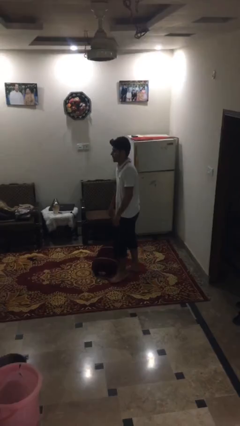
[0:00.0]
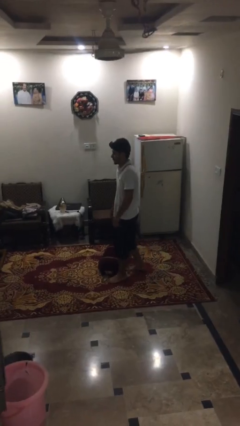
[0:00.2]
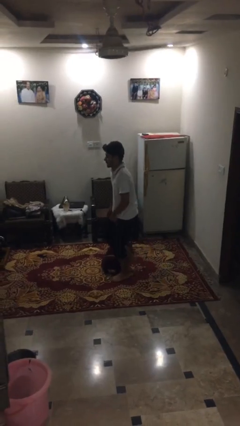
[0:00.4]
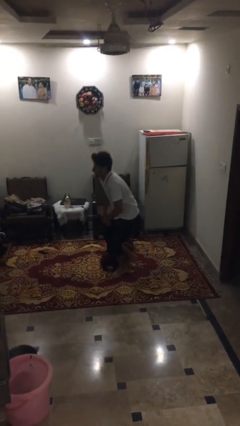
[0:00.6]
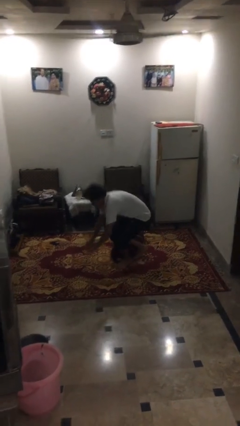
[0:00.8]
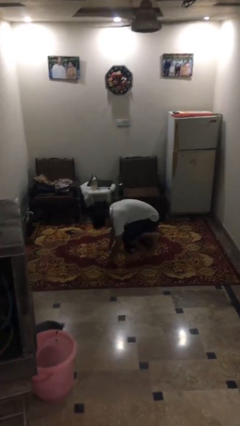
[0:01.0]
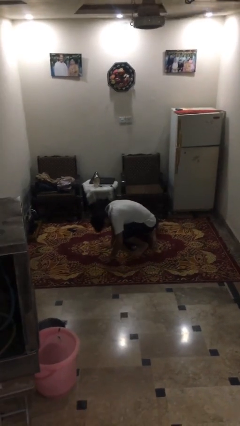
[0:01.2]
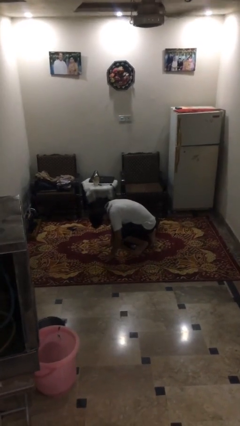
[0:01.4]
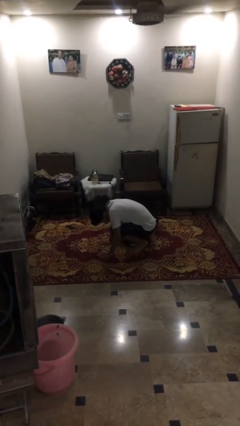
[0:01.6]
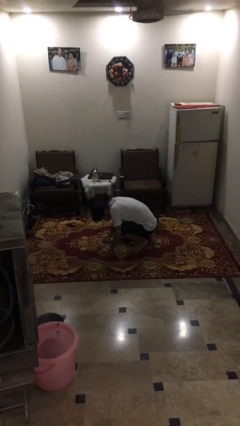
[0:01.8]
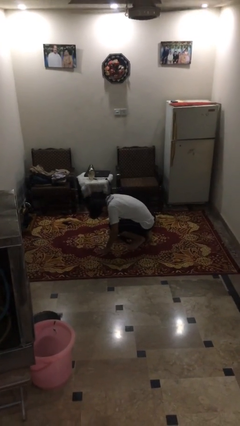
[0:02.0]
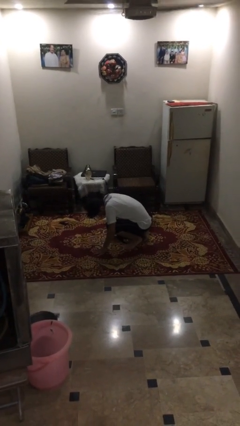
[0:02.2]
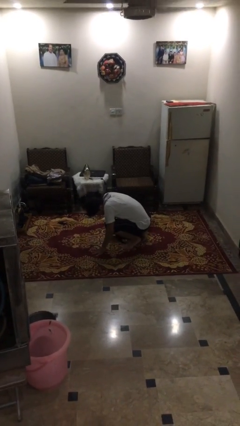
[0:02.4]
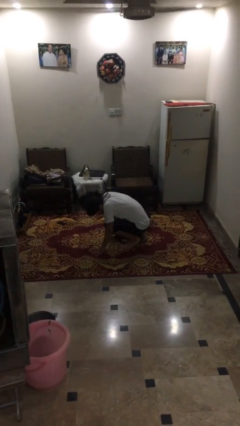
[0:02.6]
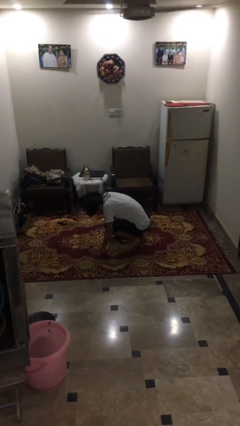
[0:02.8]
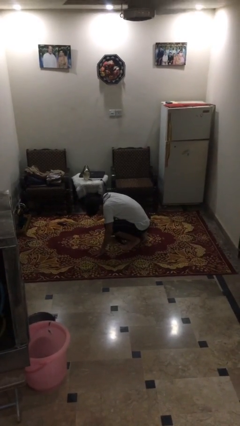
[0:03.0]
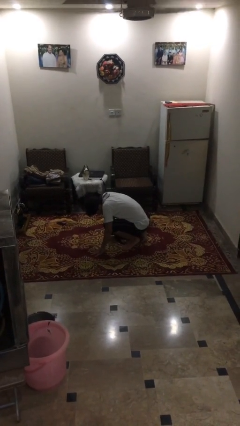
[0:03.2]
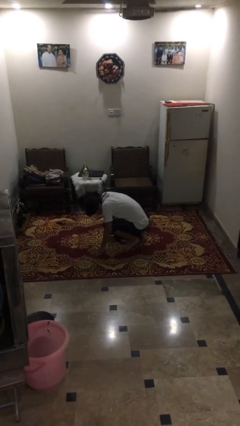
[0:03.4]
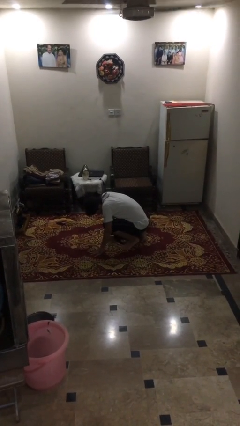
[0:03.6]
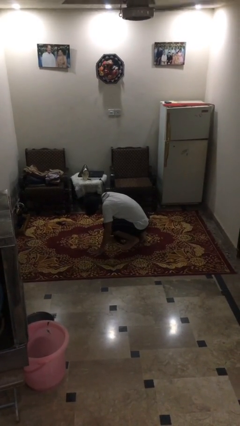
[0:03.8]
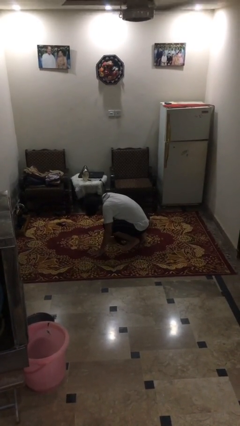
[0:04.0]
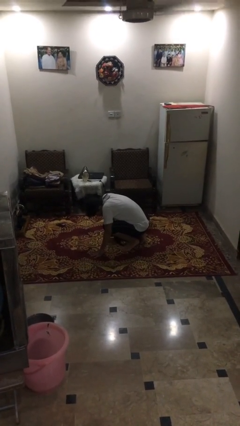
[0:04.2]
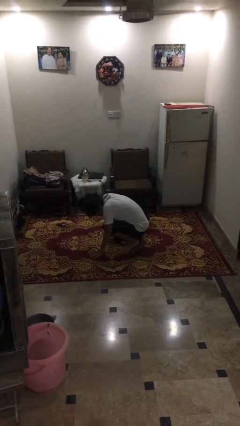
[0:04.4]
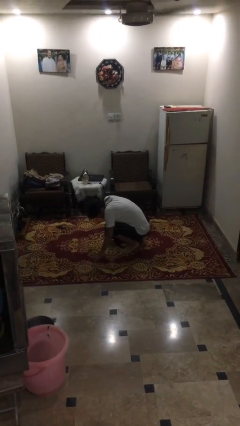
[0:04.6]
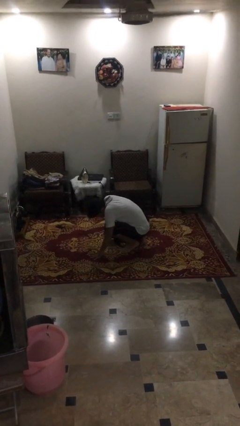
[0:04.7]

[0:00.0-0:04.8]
person trips on object on floor

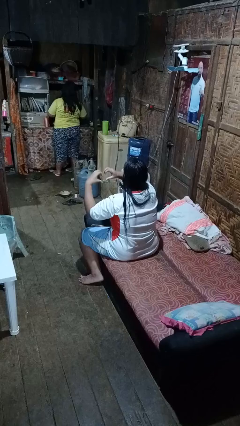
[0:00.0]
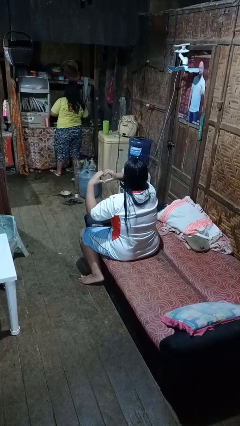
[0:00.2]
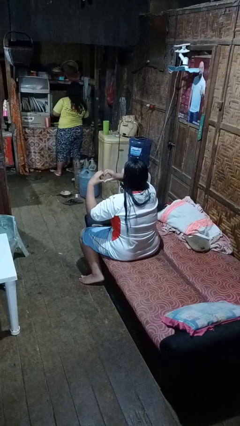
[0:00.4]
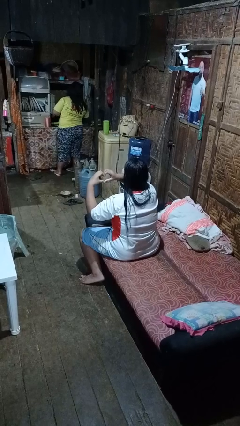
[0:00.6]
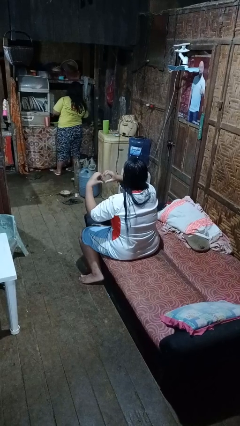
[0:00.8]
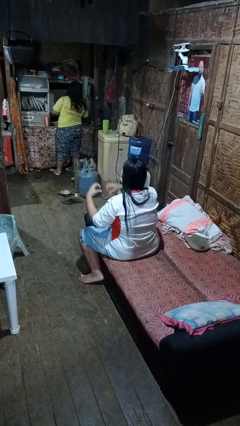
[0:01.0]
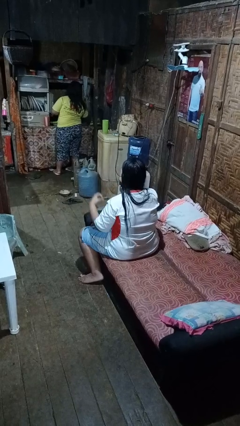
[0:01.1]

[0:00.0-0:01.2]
person gestures heart

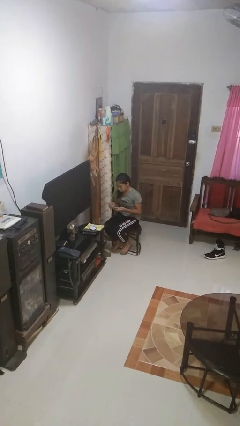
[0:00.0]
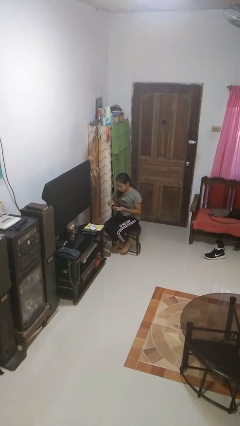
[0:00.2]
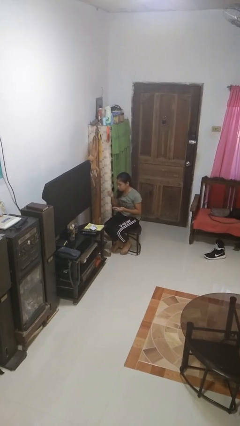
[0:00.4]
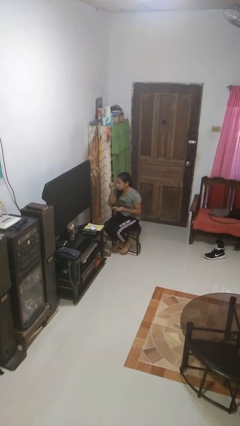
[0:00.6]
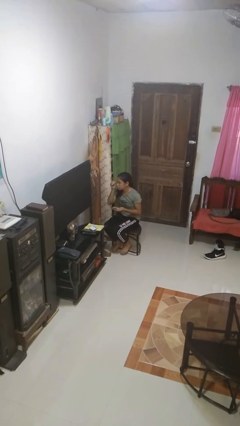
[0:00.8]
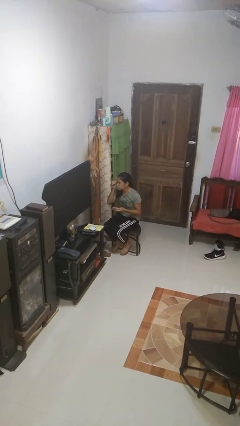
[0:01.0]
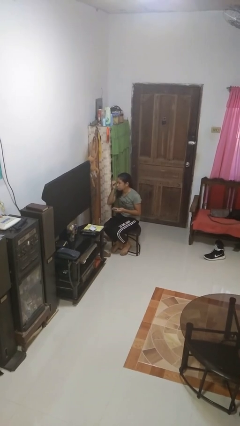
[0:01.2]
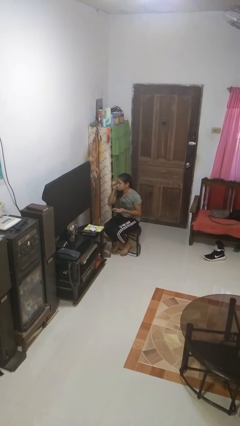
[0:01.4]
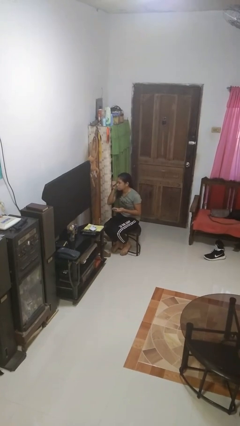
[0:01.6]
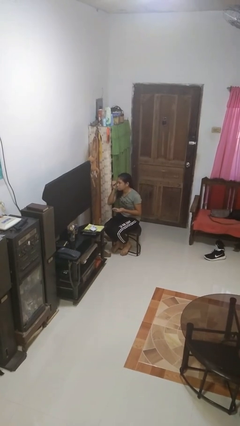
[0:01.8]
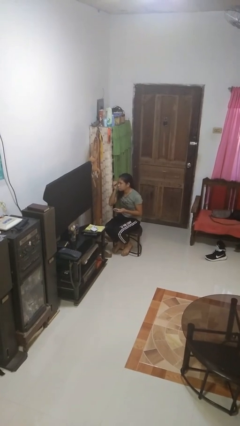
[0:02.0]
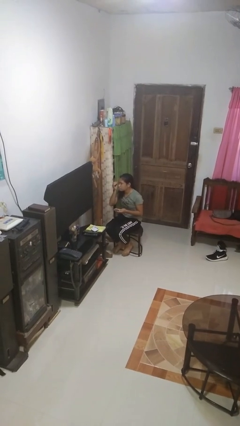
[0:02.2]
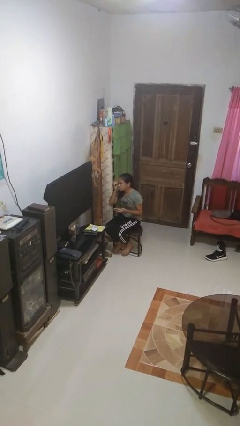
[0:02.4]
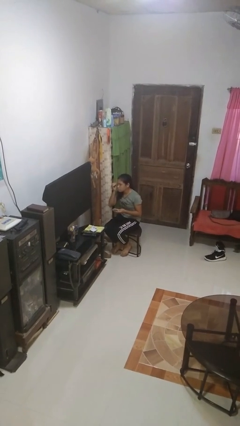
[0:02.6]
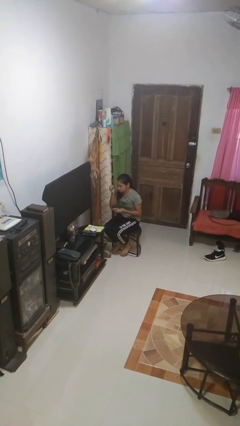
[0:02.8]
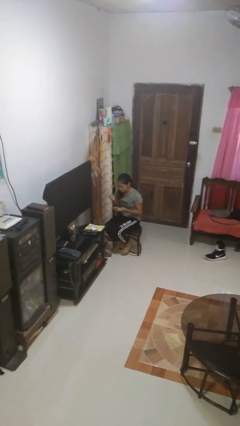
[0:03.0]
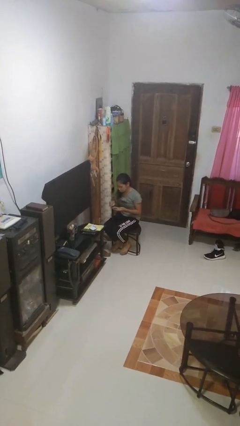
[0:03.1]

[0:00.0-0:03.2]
person applies eye makeup

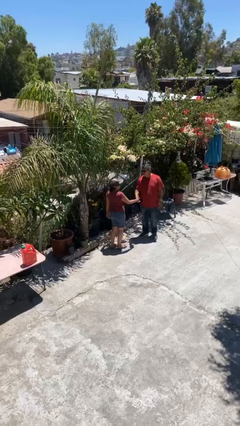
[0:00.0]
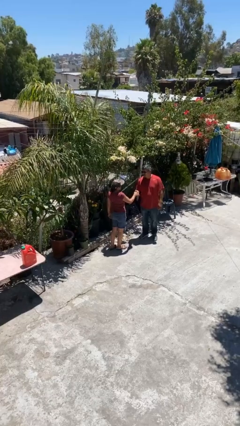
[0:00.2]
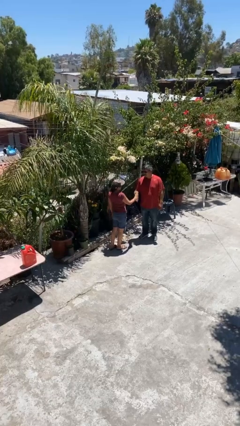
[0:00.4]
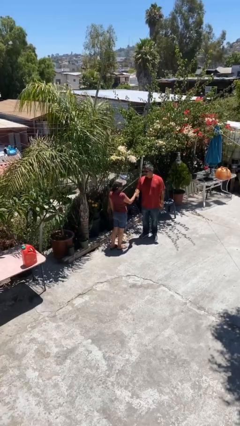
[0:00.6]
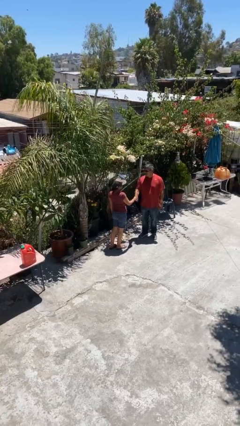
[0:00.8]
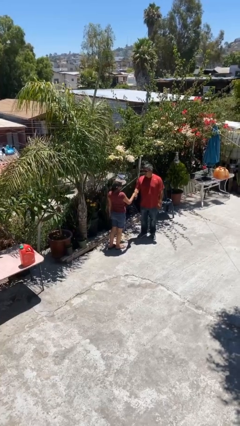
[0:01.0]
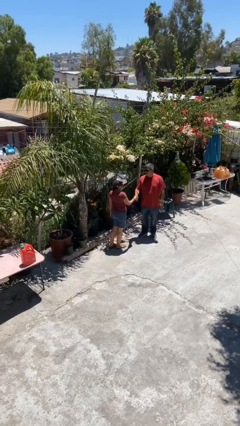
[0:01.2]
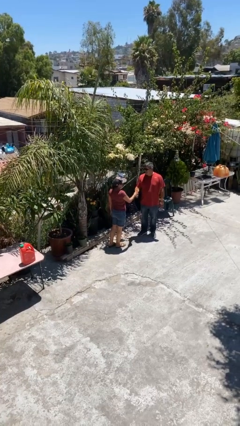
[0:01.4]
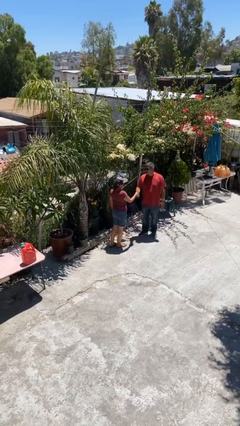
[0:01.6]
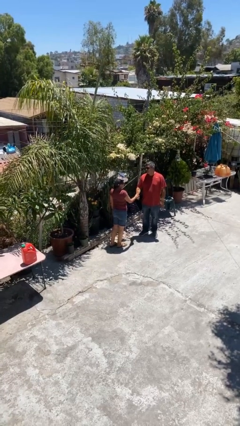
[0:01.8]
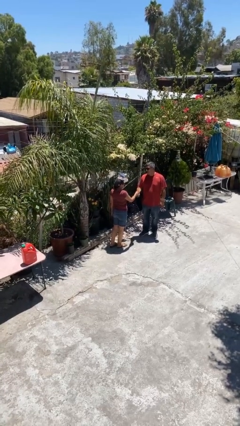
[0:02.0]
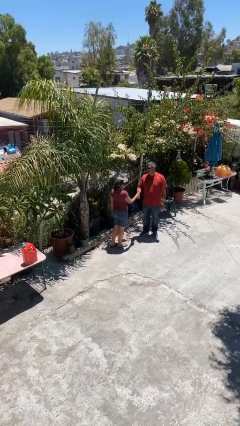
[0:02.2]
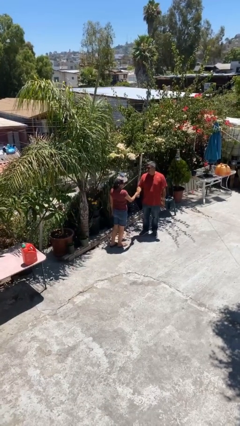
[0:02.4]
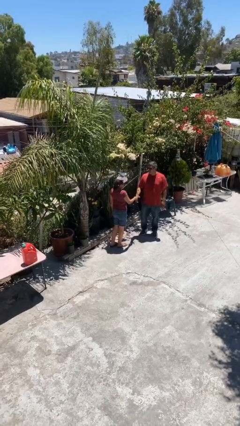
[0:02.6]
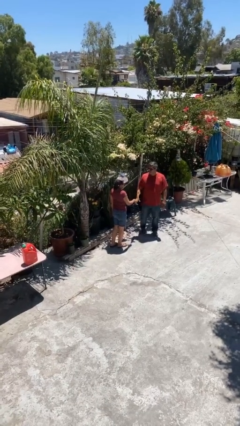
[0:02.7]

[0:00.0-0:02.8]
person shakes hand

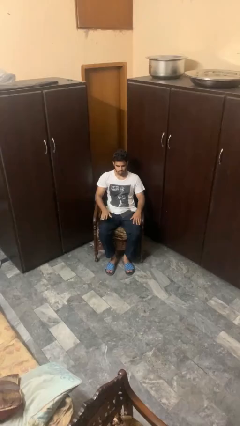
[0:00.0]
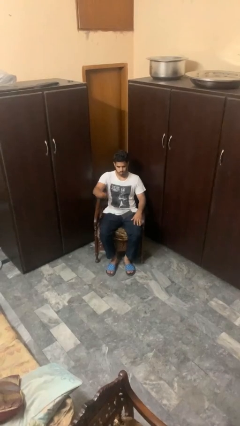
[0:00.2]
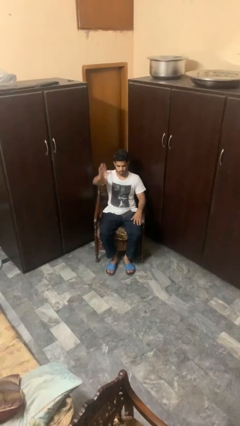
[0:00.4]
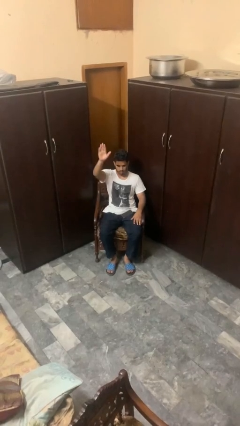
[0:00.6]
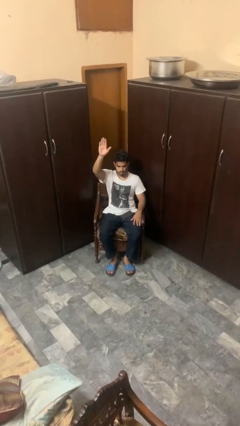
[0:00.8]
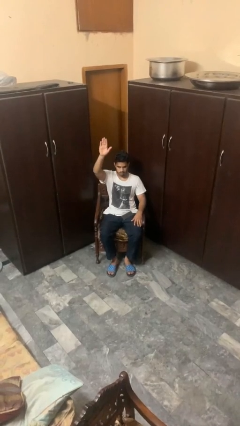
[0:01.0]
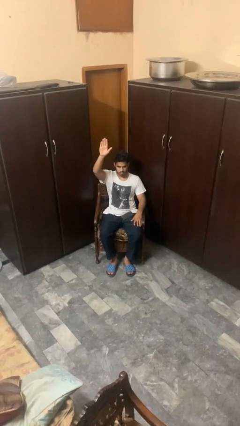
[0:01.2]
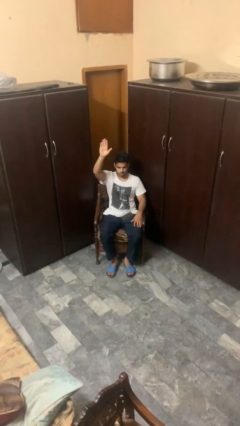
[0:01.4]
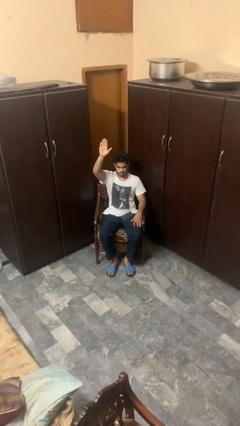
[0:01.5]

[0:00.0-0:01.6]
person gestures raise hand

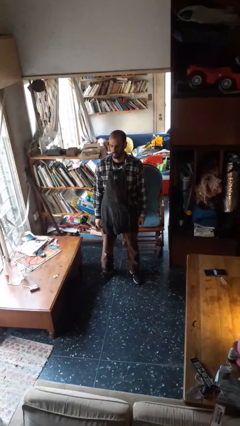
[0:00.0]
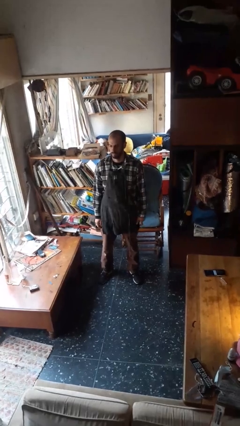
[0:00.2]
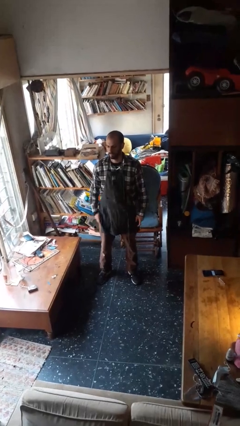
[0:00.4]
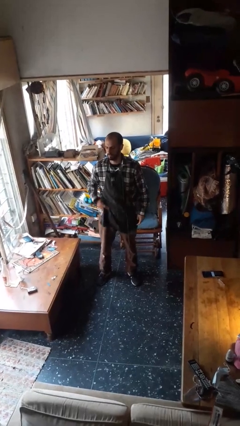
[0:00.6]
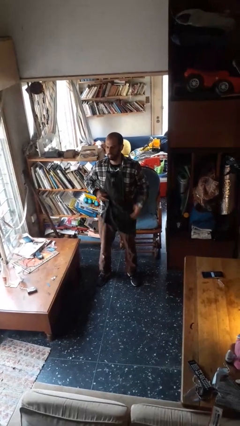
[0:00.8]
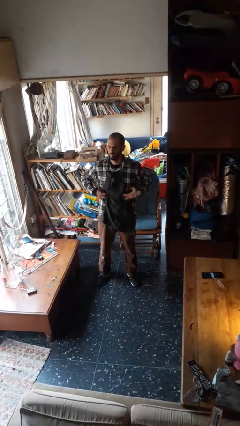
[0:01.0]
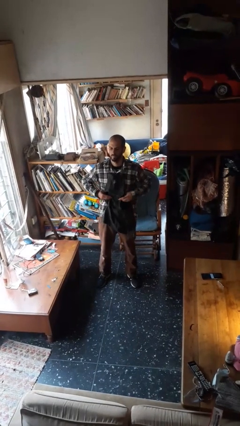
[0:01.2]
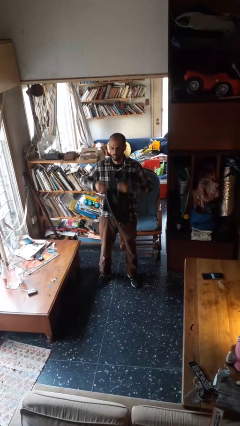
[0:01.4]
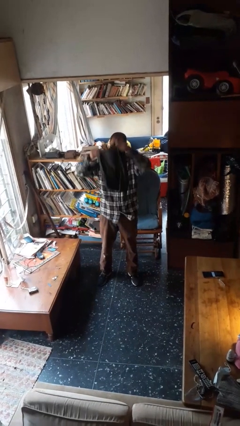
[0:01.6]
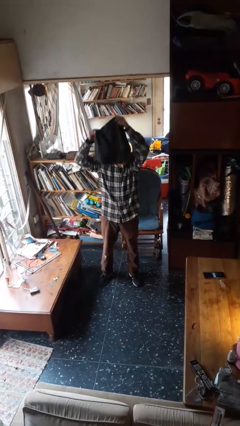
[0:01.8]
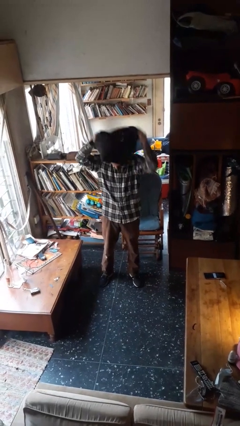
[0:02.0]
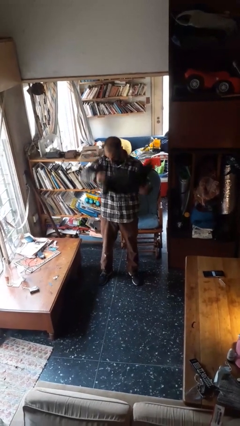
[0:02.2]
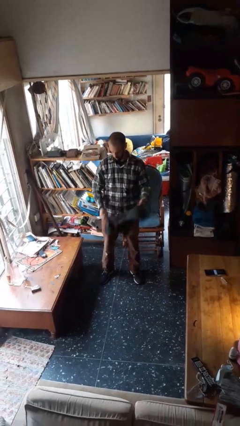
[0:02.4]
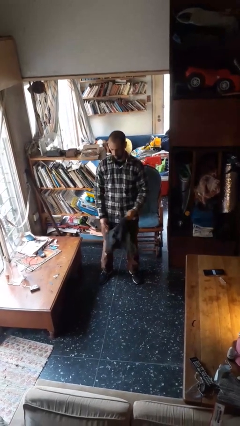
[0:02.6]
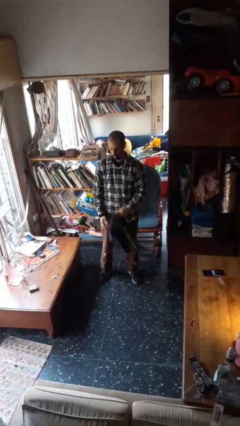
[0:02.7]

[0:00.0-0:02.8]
person takes off apron

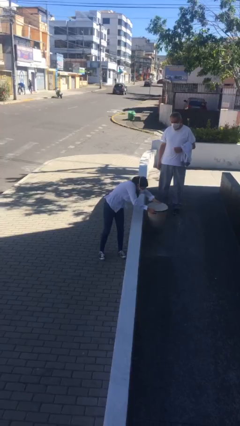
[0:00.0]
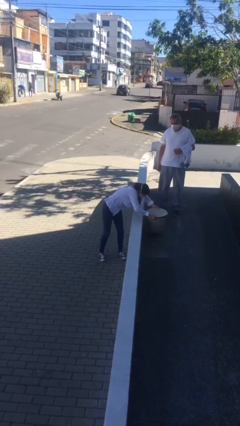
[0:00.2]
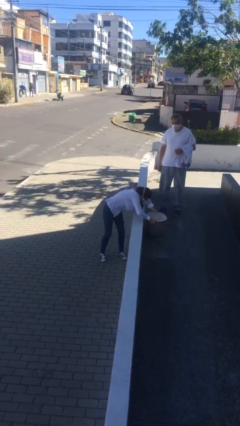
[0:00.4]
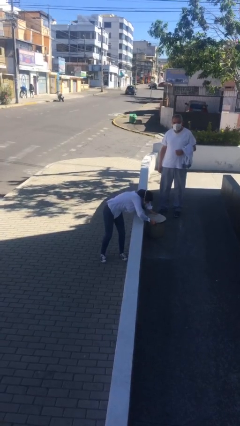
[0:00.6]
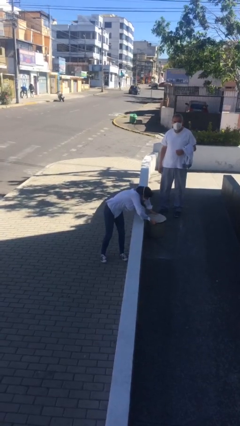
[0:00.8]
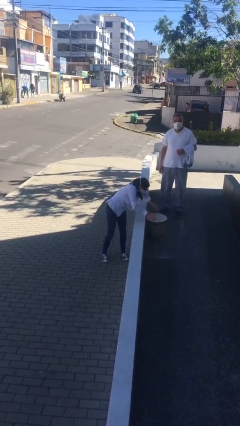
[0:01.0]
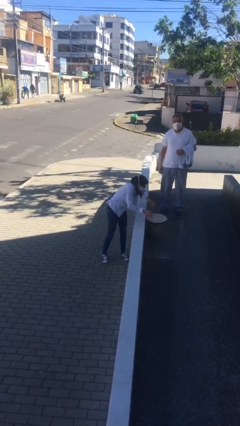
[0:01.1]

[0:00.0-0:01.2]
person puts down object on floor
